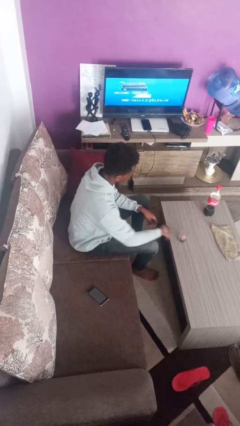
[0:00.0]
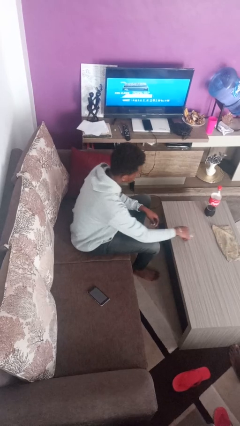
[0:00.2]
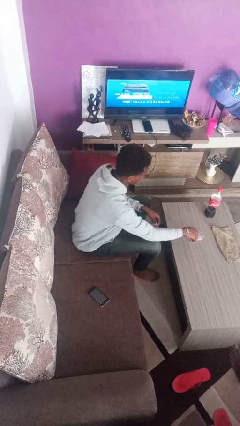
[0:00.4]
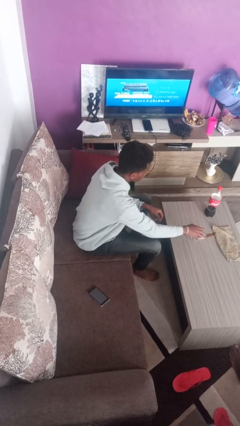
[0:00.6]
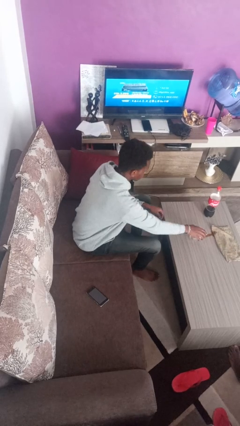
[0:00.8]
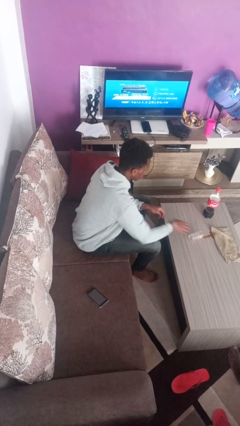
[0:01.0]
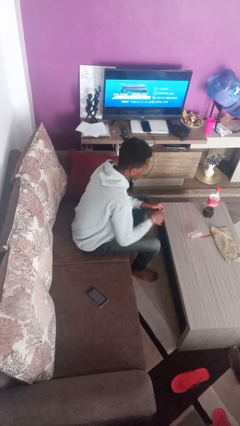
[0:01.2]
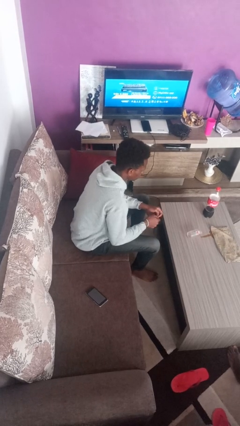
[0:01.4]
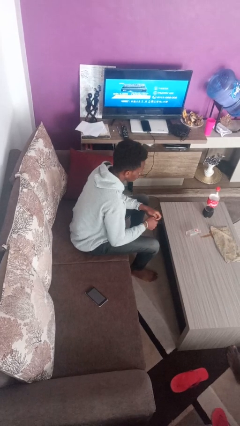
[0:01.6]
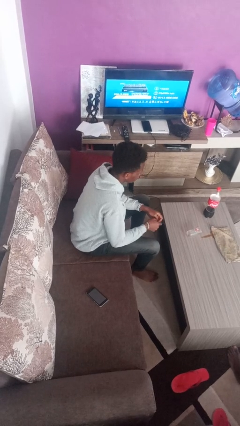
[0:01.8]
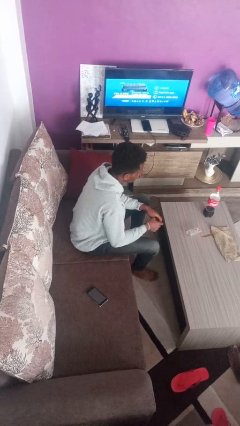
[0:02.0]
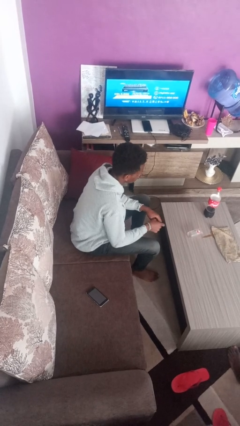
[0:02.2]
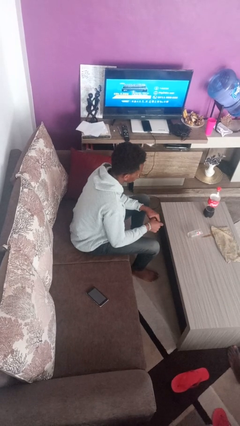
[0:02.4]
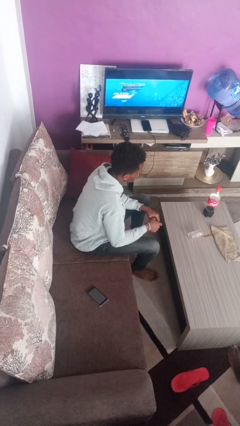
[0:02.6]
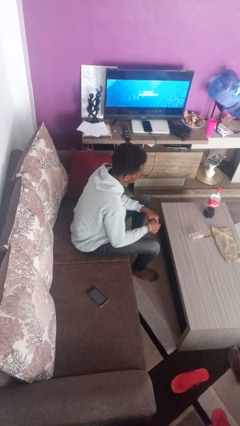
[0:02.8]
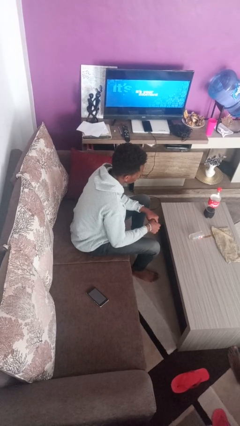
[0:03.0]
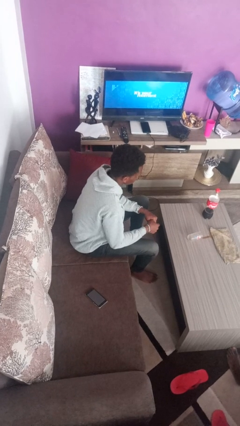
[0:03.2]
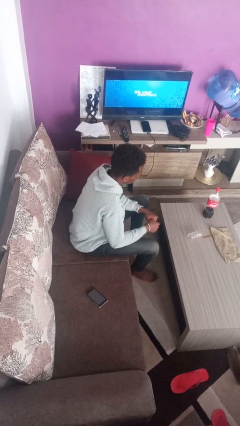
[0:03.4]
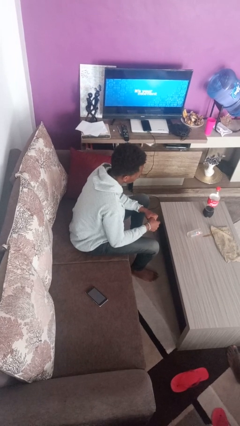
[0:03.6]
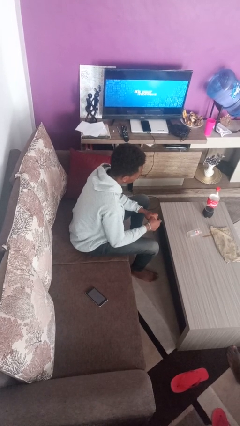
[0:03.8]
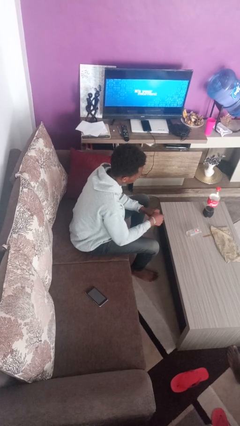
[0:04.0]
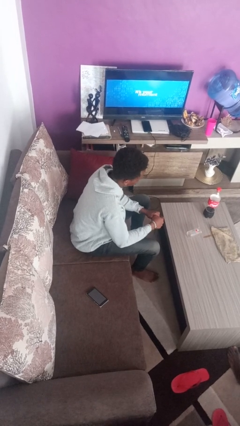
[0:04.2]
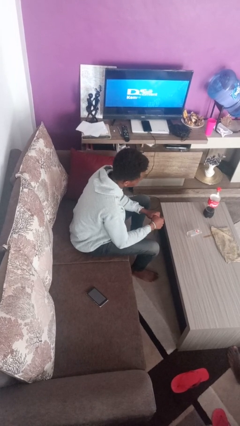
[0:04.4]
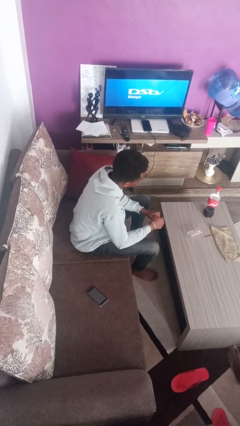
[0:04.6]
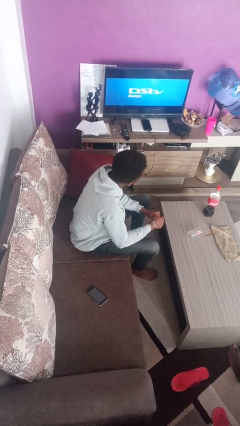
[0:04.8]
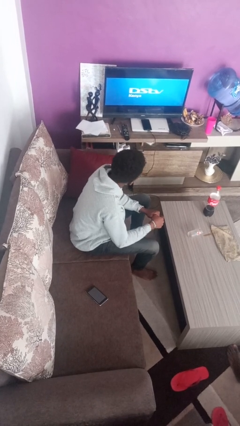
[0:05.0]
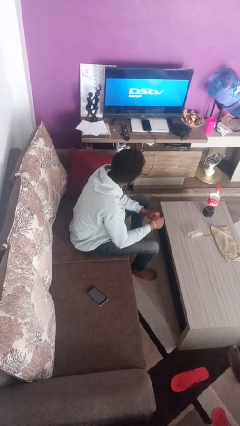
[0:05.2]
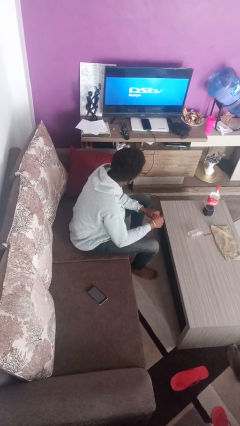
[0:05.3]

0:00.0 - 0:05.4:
person spills on table

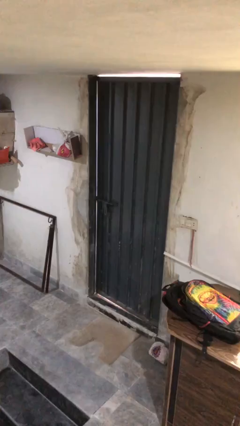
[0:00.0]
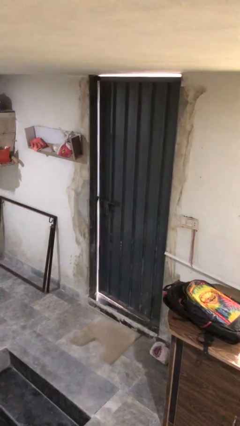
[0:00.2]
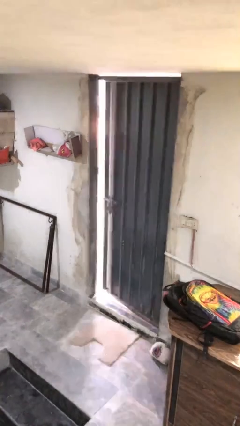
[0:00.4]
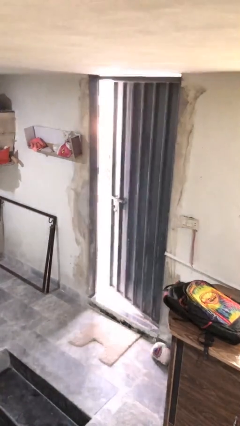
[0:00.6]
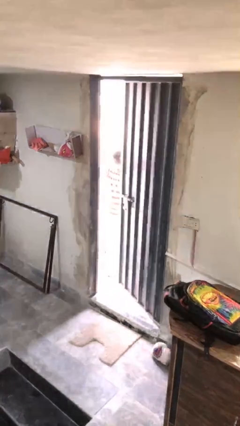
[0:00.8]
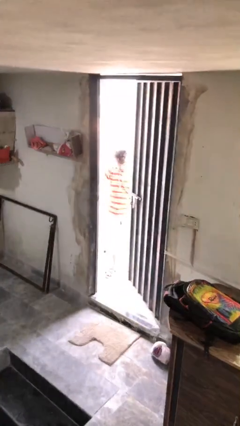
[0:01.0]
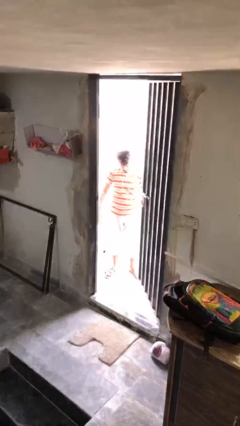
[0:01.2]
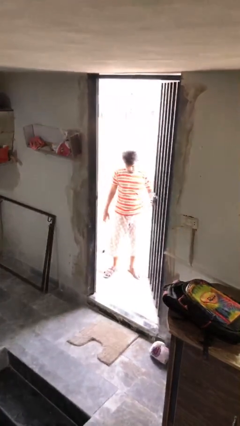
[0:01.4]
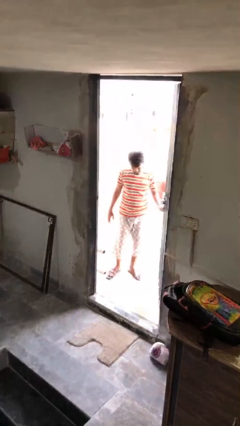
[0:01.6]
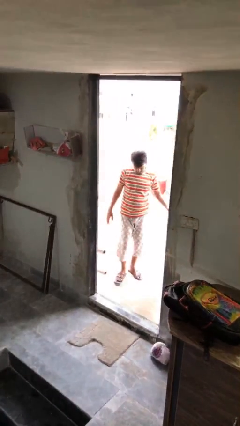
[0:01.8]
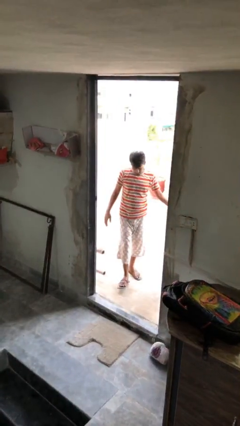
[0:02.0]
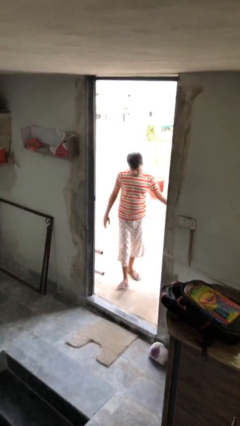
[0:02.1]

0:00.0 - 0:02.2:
person opens facility door

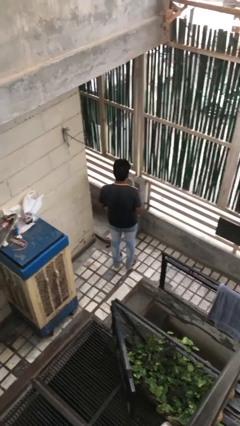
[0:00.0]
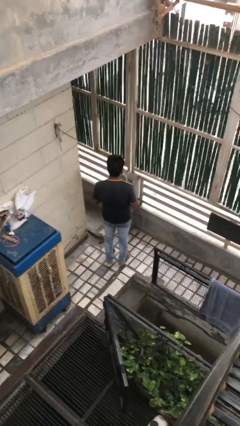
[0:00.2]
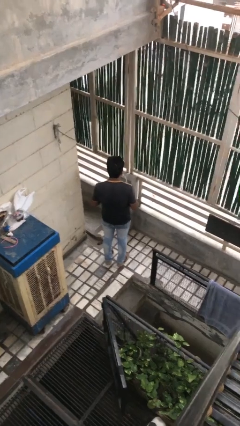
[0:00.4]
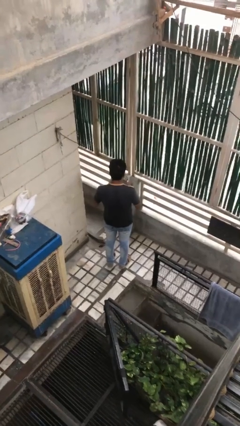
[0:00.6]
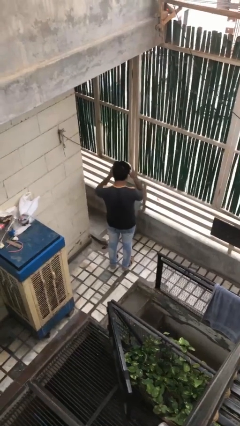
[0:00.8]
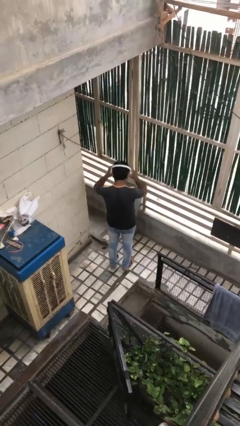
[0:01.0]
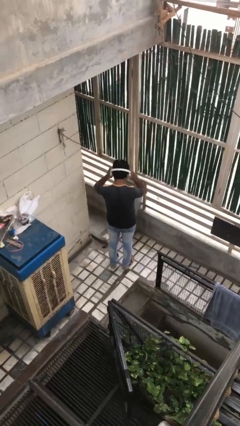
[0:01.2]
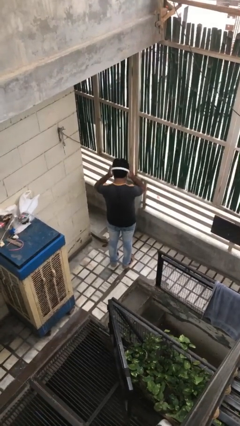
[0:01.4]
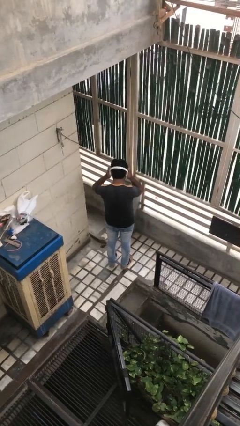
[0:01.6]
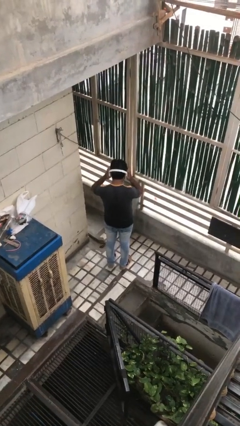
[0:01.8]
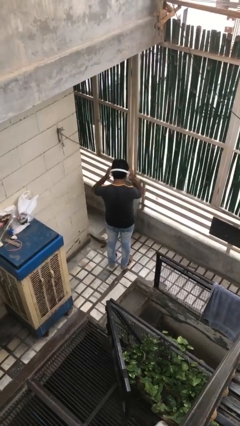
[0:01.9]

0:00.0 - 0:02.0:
person puts on headphones

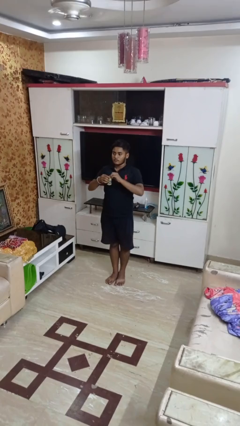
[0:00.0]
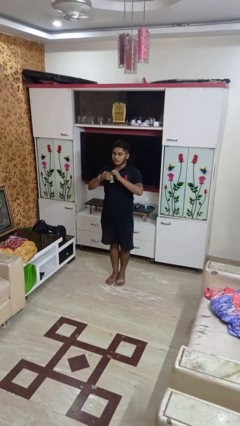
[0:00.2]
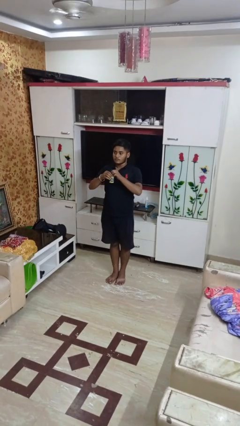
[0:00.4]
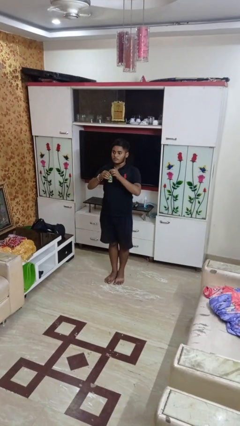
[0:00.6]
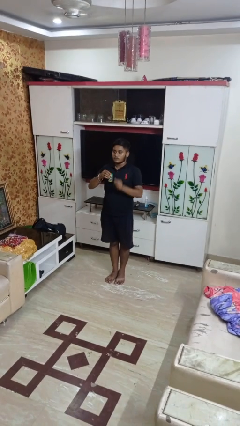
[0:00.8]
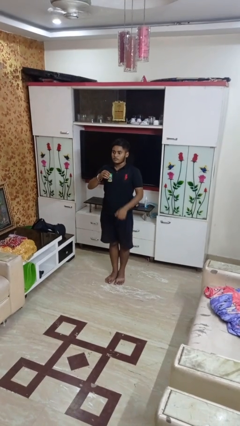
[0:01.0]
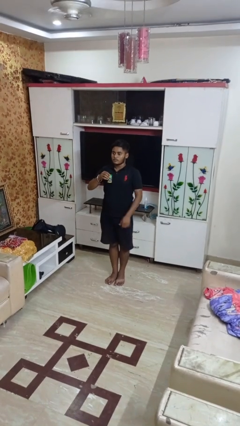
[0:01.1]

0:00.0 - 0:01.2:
person opens beverage can

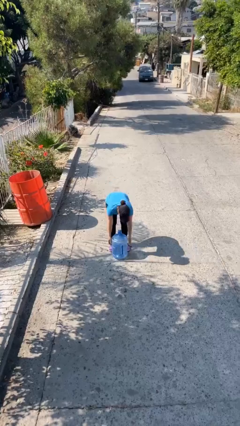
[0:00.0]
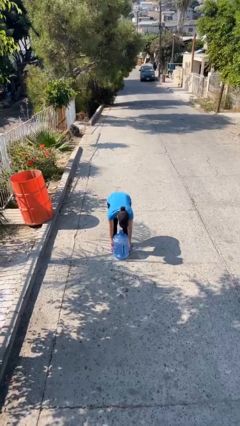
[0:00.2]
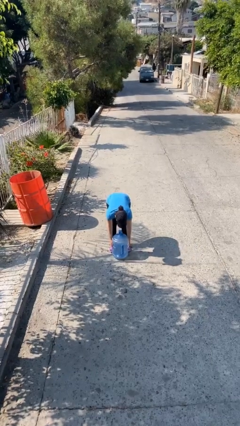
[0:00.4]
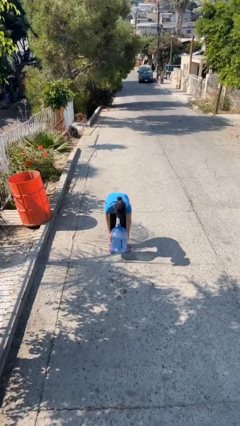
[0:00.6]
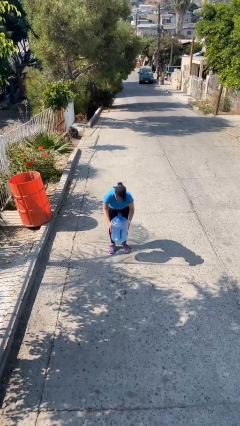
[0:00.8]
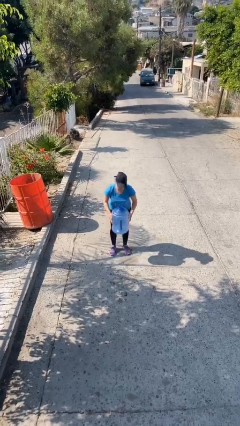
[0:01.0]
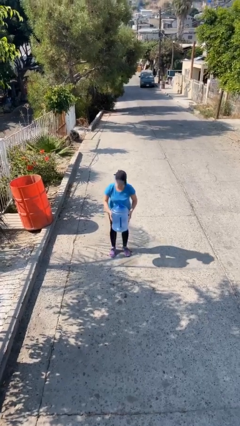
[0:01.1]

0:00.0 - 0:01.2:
person picks up object from floor

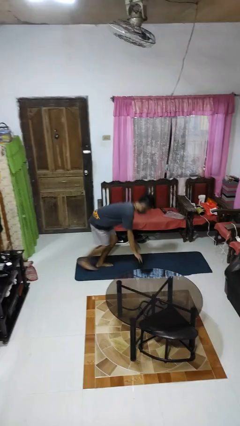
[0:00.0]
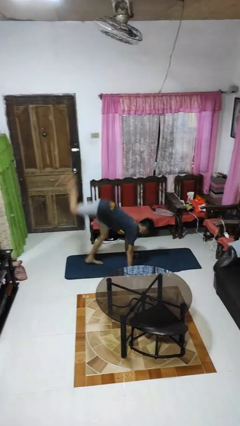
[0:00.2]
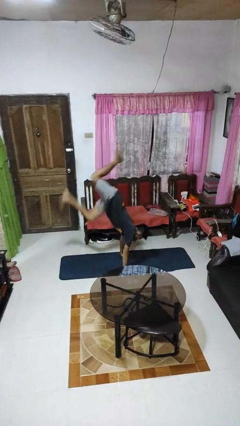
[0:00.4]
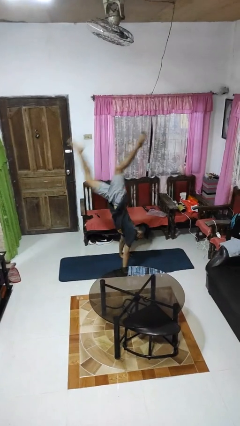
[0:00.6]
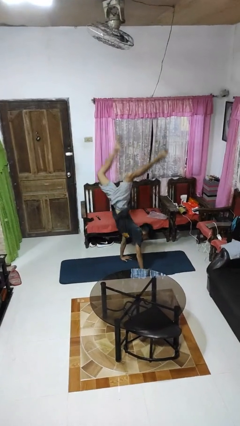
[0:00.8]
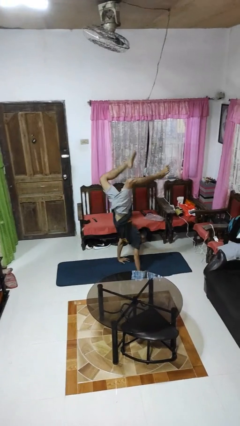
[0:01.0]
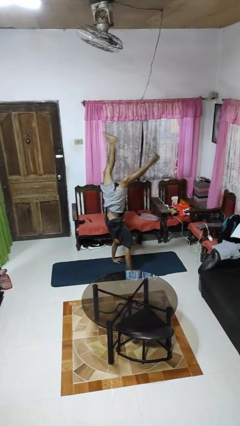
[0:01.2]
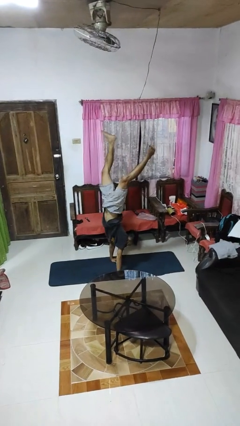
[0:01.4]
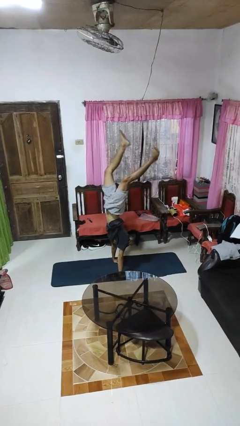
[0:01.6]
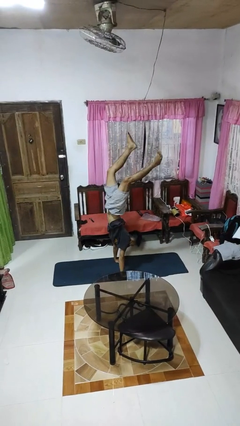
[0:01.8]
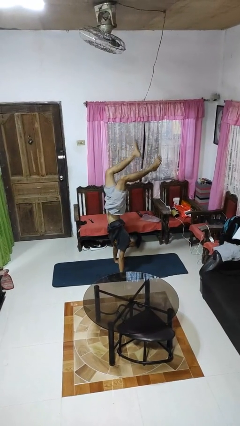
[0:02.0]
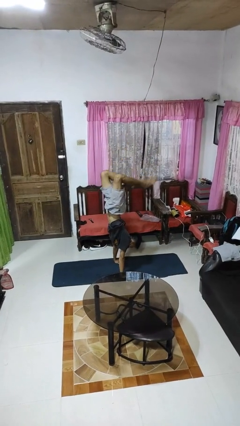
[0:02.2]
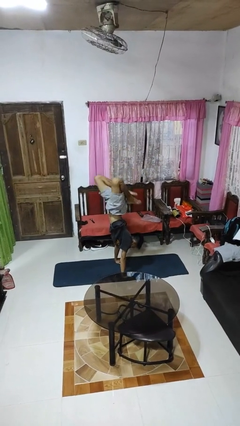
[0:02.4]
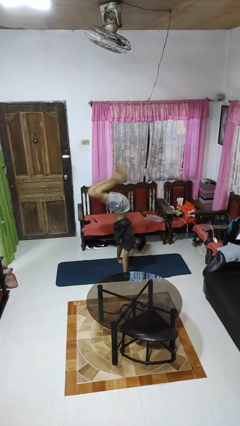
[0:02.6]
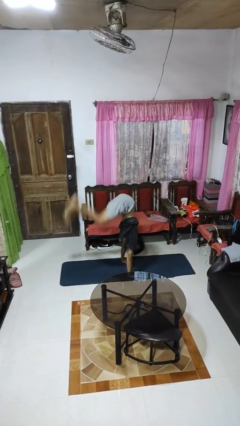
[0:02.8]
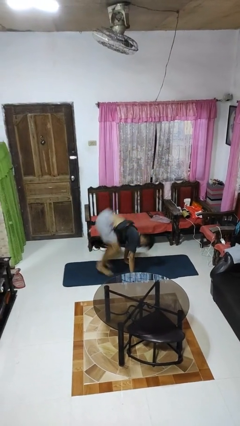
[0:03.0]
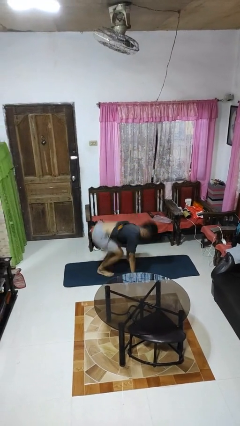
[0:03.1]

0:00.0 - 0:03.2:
person handstand

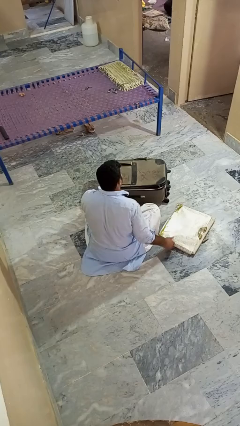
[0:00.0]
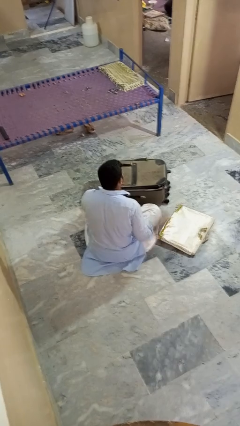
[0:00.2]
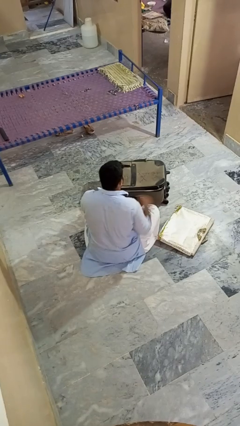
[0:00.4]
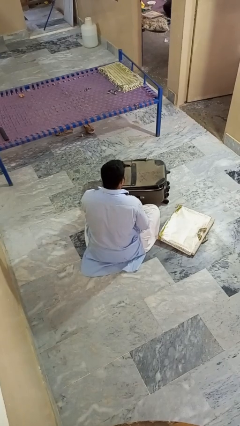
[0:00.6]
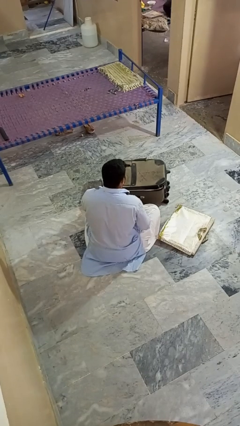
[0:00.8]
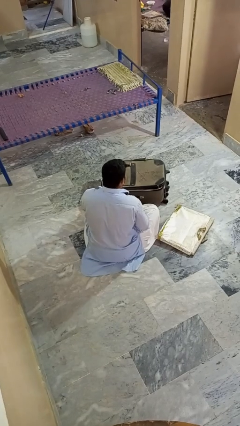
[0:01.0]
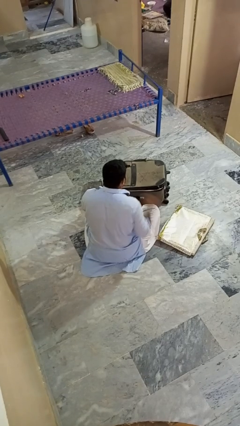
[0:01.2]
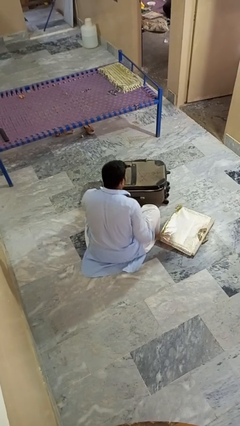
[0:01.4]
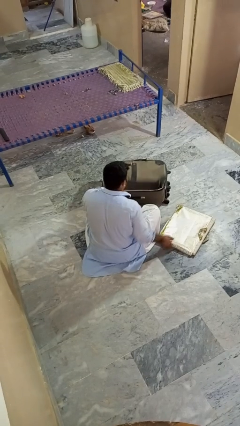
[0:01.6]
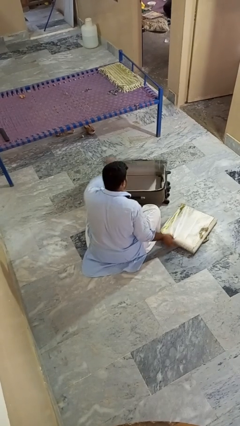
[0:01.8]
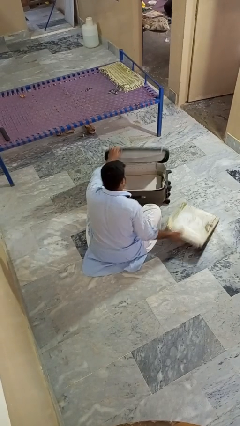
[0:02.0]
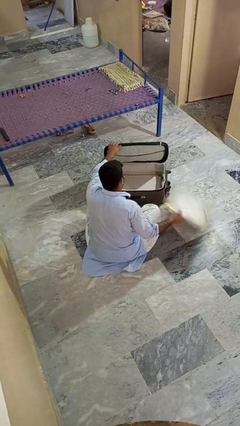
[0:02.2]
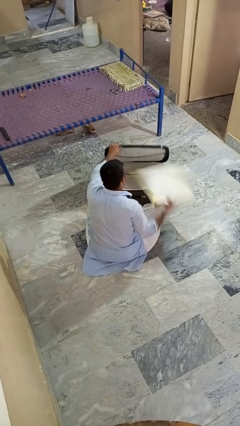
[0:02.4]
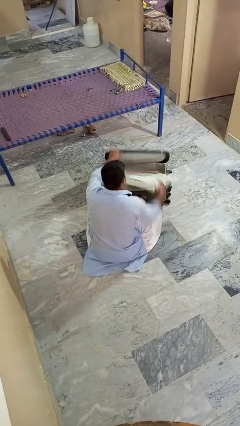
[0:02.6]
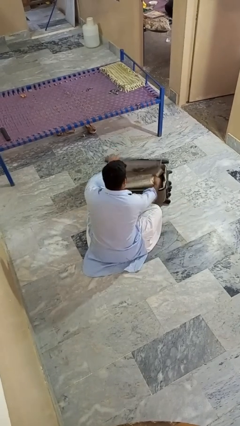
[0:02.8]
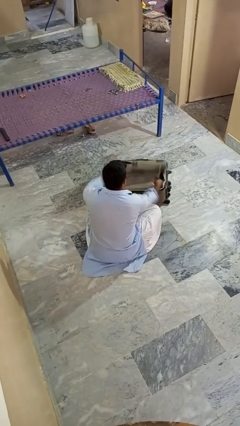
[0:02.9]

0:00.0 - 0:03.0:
person puts object into bag
